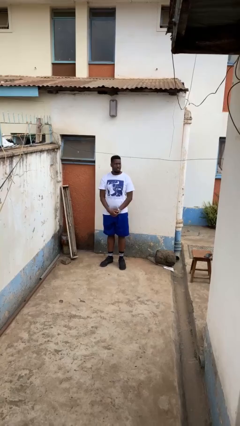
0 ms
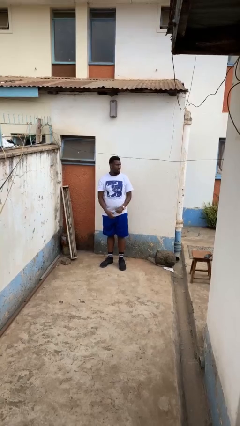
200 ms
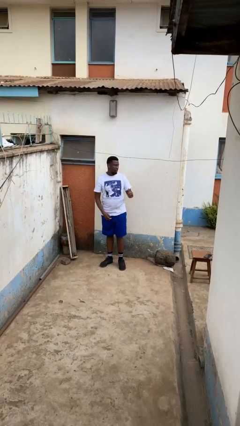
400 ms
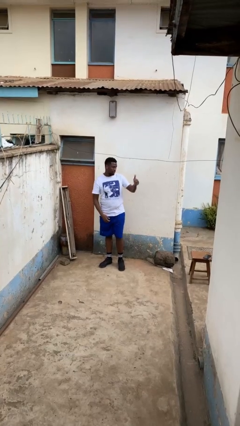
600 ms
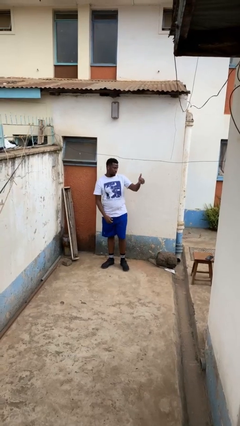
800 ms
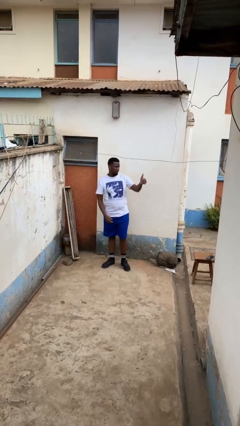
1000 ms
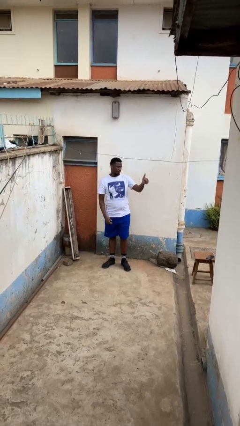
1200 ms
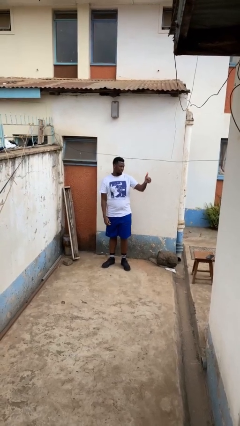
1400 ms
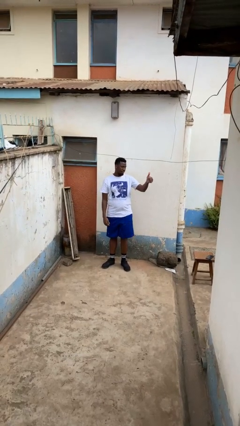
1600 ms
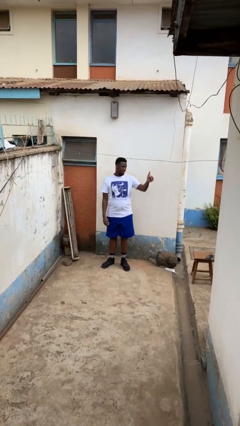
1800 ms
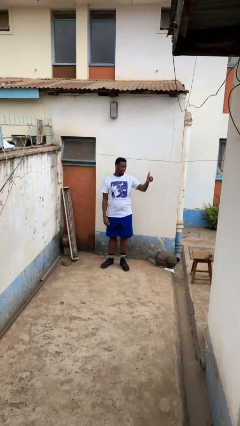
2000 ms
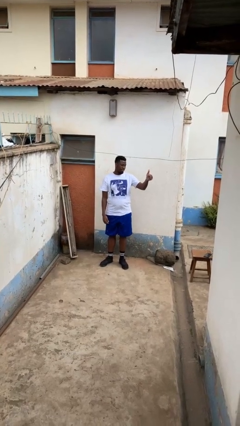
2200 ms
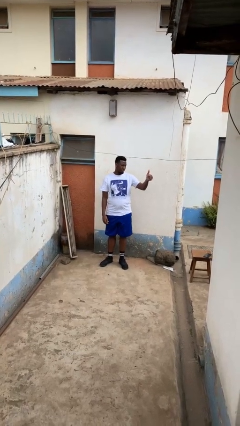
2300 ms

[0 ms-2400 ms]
person gestures thumbs up

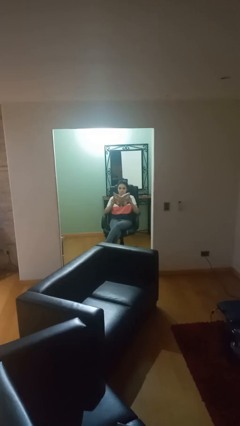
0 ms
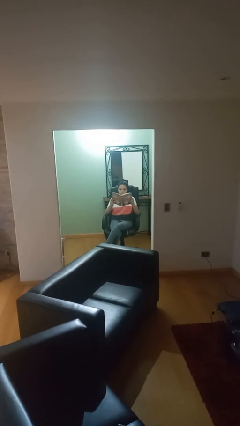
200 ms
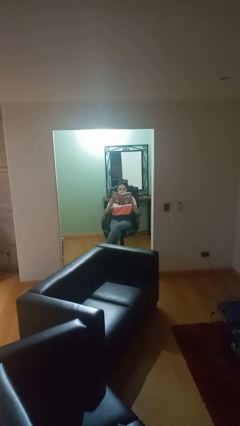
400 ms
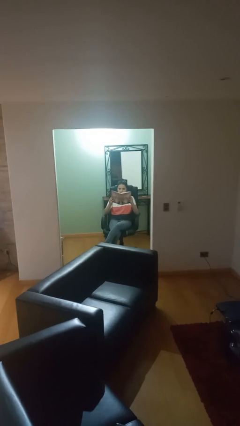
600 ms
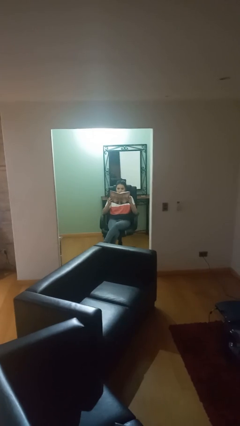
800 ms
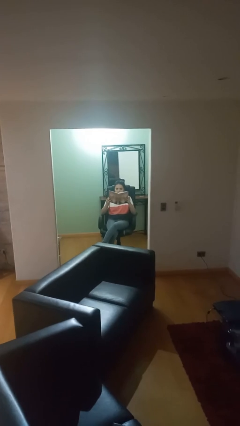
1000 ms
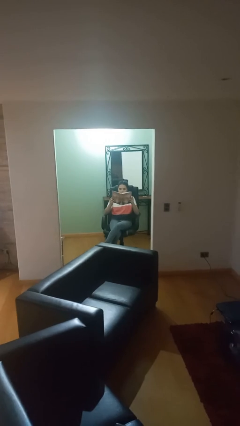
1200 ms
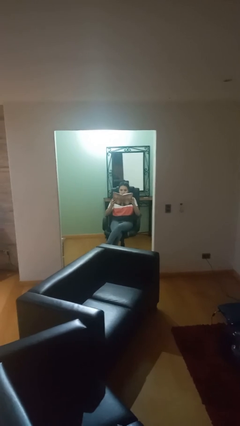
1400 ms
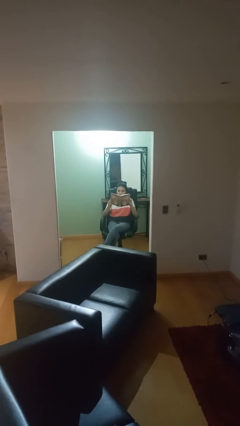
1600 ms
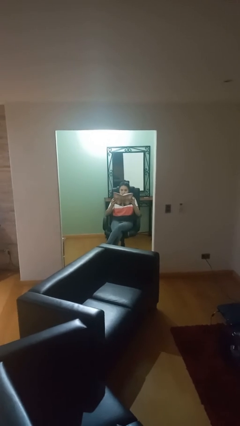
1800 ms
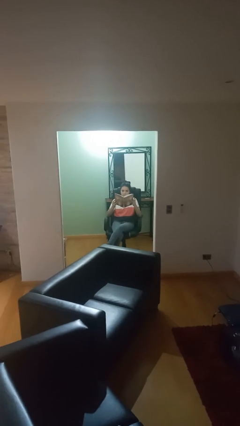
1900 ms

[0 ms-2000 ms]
person reads document

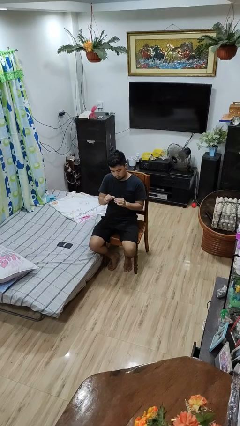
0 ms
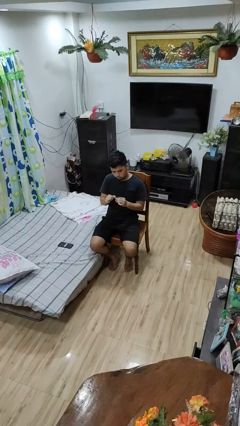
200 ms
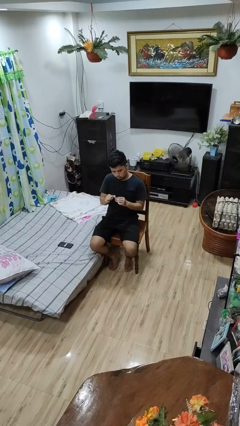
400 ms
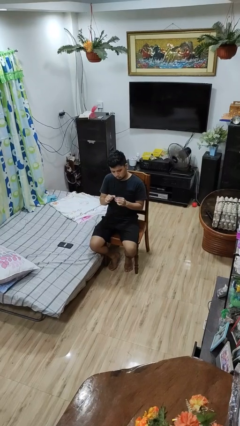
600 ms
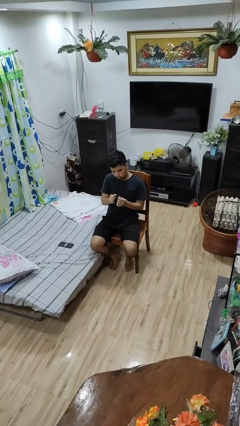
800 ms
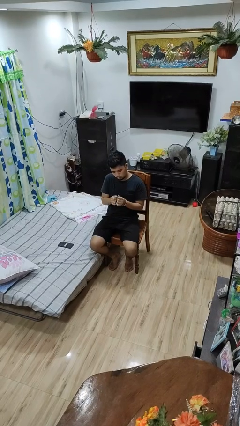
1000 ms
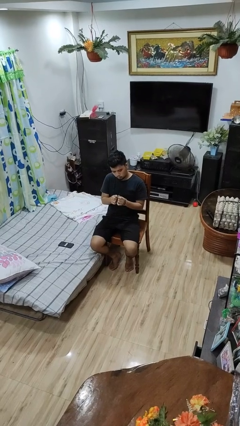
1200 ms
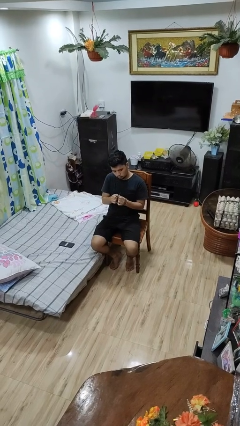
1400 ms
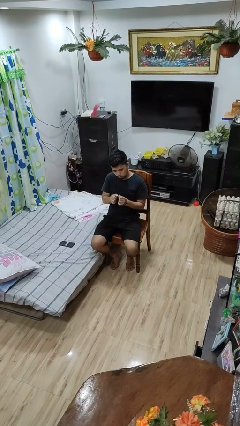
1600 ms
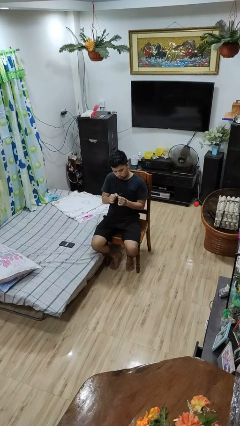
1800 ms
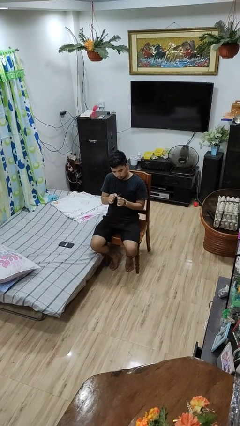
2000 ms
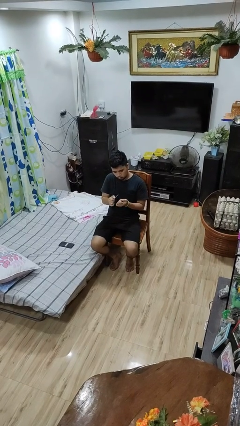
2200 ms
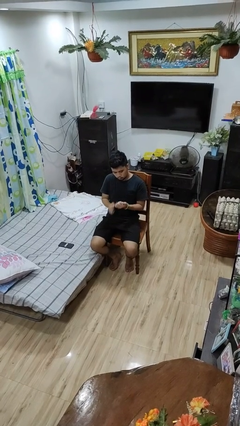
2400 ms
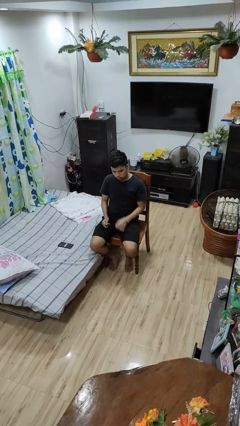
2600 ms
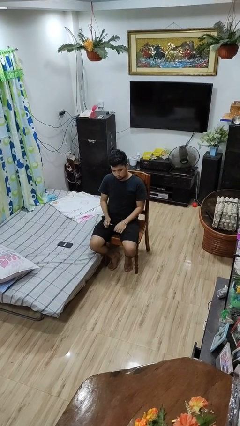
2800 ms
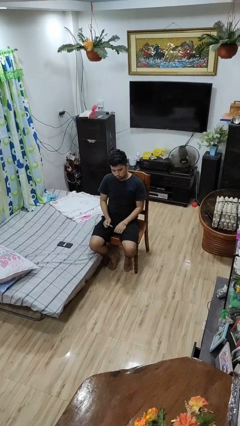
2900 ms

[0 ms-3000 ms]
person files fingernails

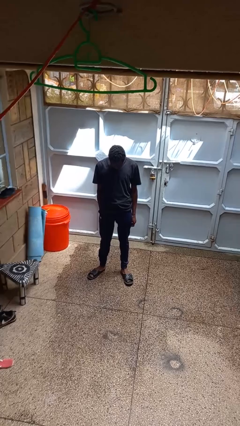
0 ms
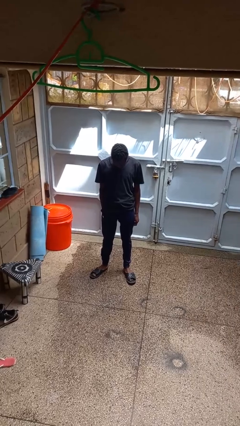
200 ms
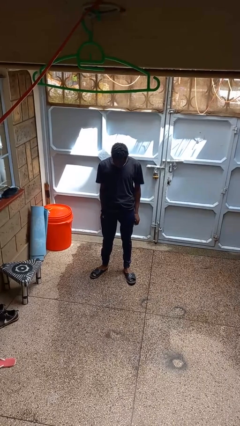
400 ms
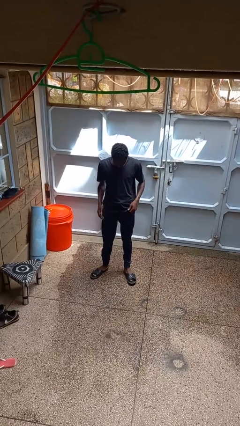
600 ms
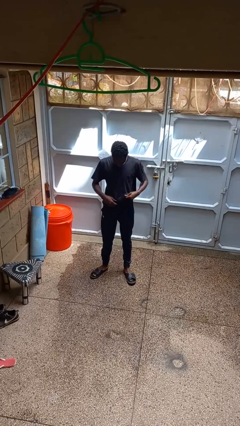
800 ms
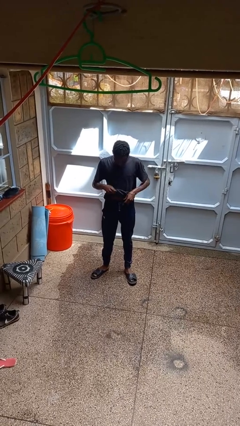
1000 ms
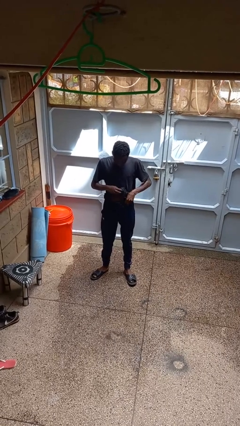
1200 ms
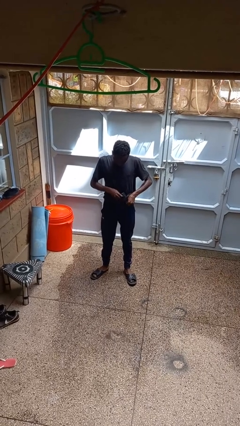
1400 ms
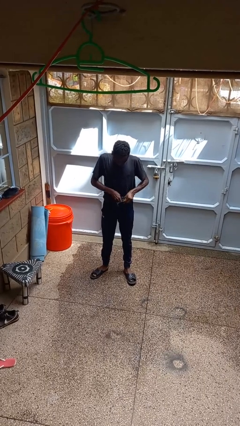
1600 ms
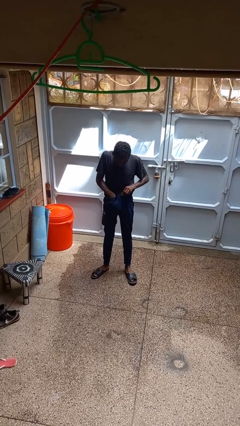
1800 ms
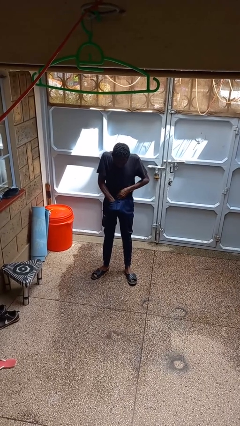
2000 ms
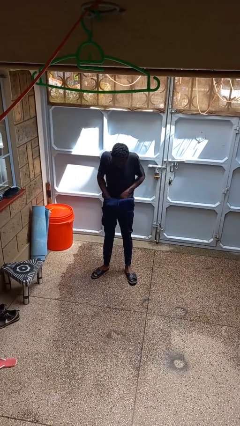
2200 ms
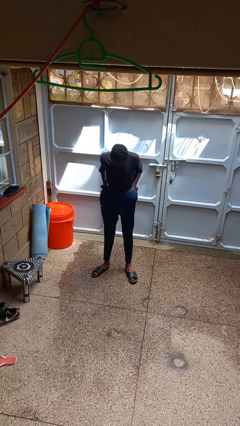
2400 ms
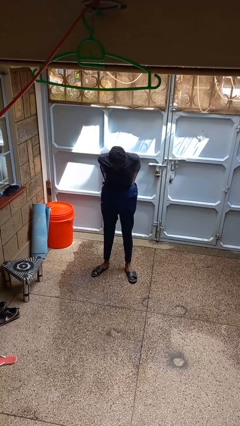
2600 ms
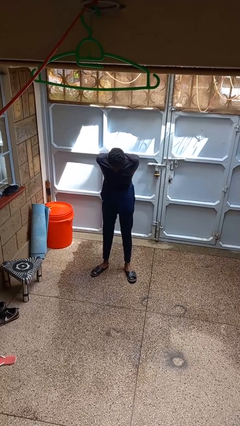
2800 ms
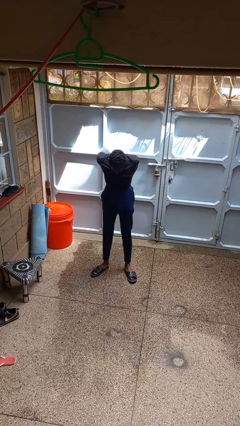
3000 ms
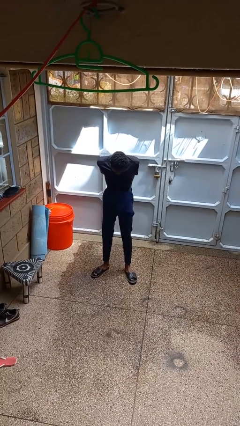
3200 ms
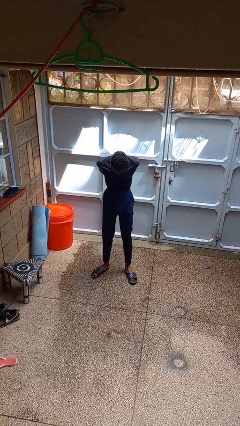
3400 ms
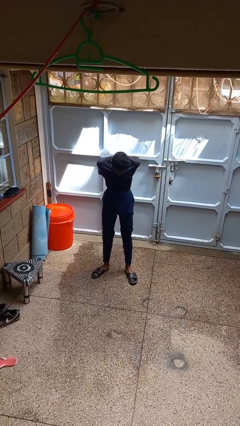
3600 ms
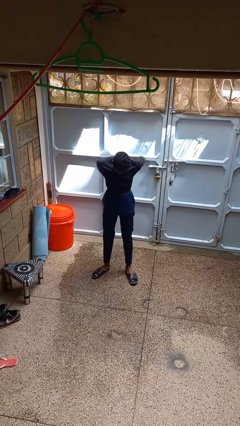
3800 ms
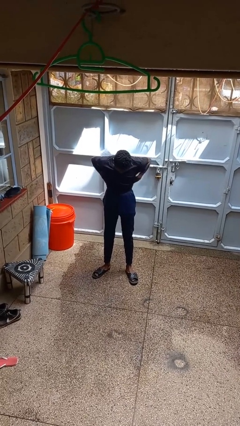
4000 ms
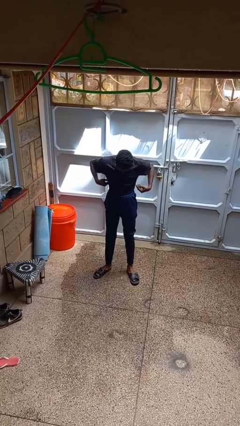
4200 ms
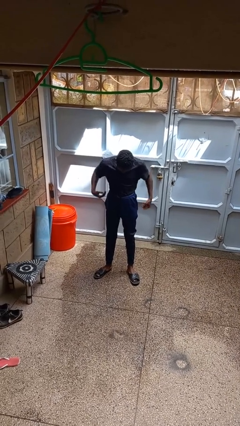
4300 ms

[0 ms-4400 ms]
person tucks in shirt

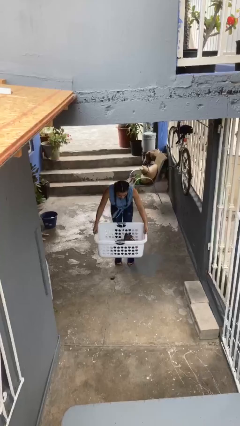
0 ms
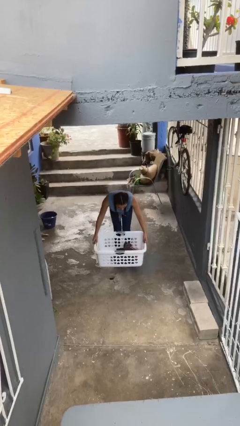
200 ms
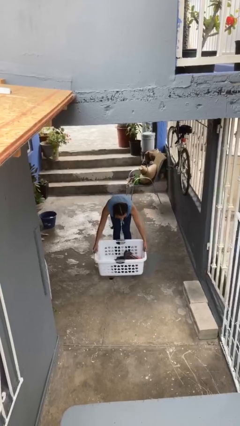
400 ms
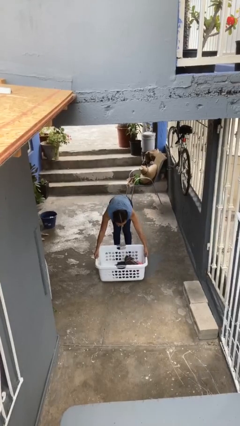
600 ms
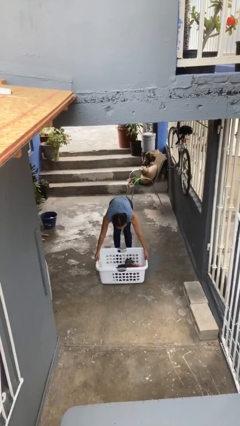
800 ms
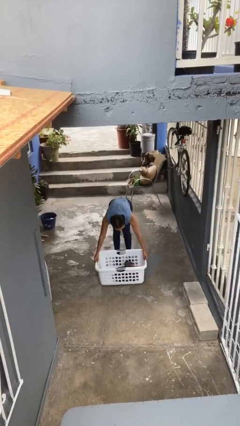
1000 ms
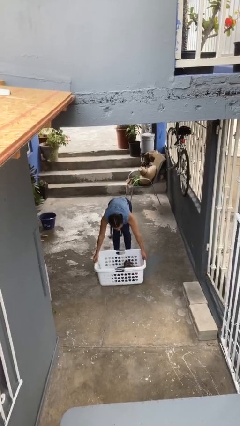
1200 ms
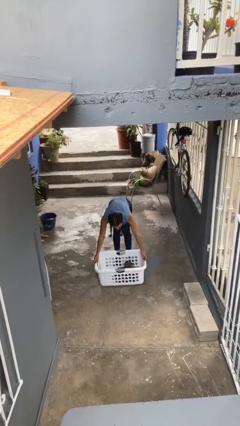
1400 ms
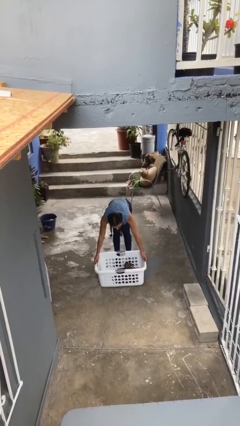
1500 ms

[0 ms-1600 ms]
person puts down object on floor

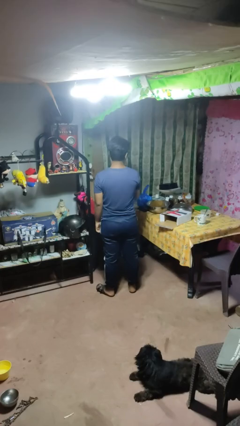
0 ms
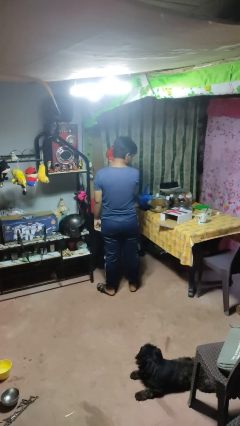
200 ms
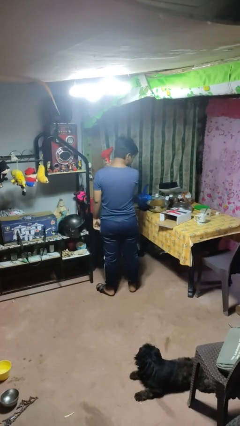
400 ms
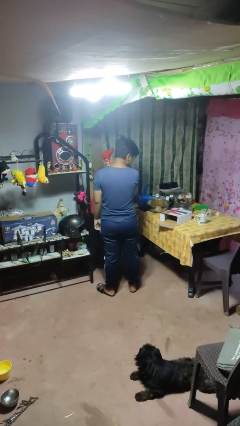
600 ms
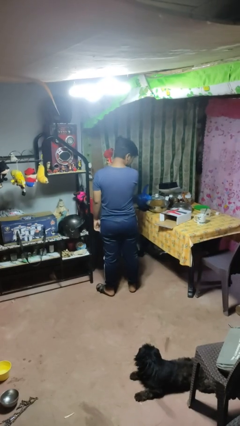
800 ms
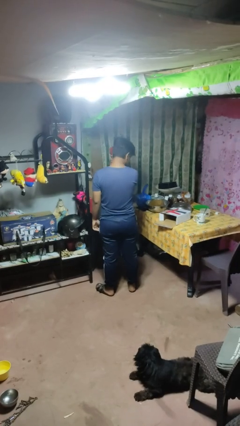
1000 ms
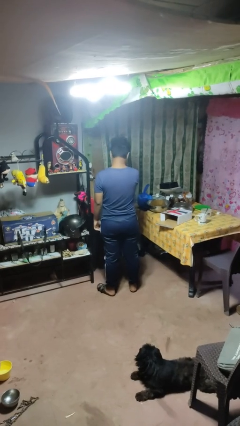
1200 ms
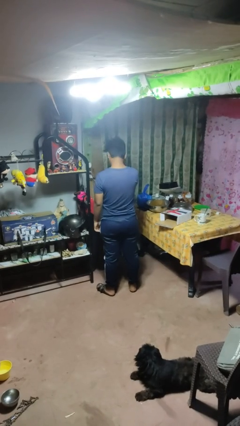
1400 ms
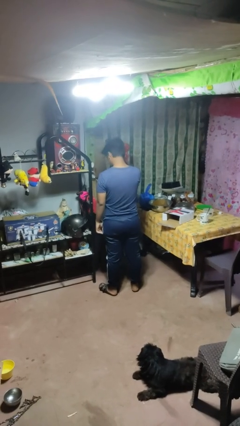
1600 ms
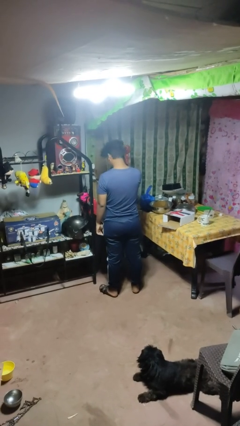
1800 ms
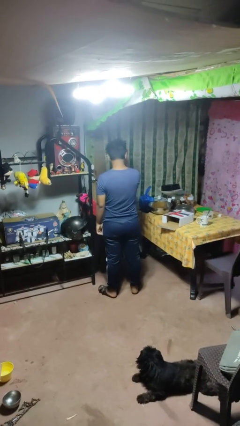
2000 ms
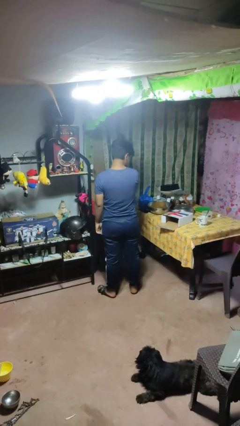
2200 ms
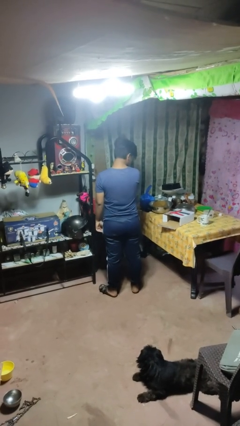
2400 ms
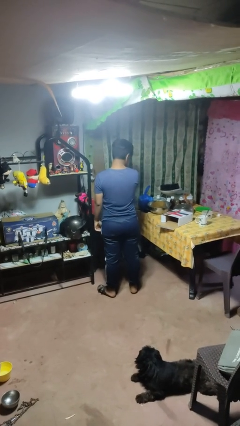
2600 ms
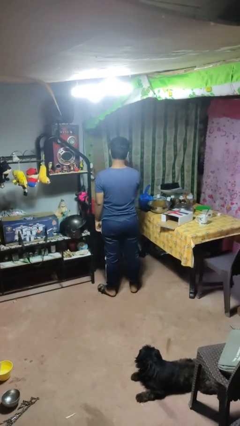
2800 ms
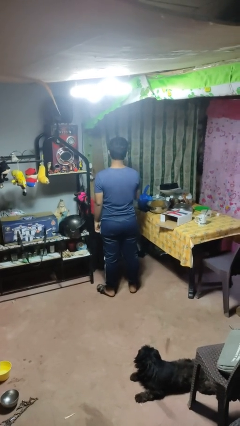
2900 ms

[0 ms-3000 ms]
person dries hair with hairdryer

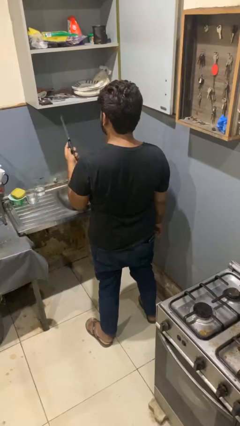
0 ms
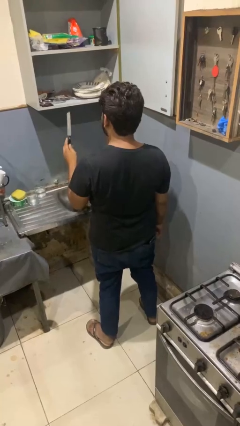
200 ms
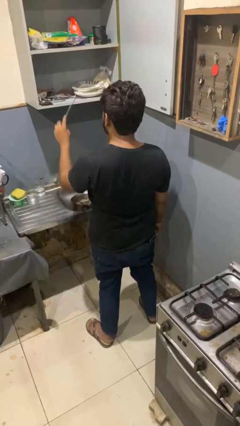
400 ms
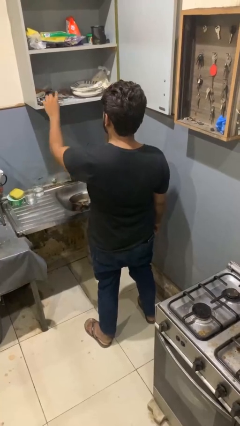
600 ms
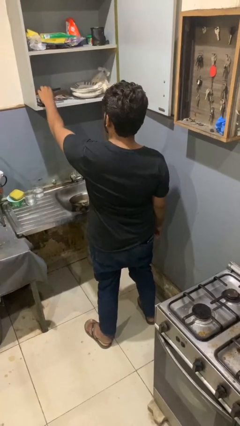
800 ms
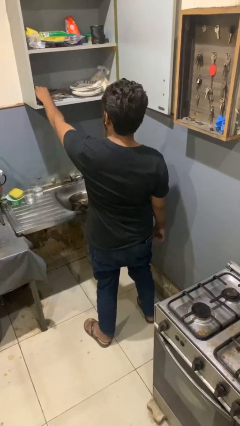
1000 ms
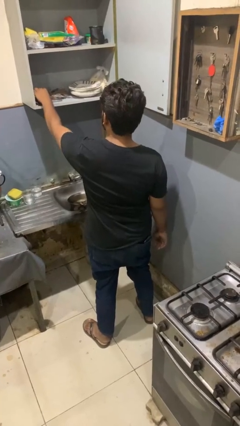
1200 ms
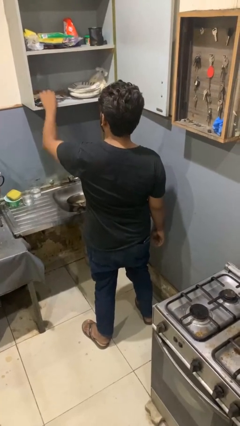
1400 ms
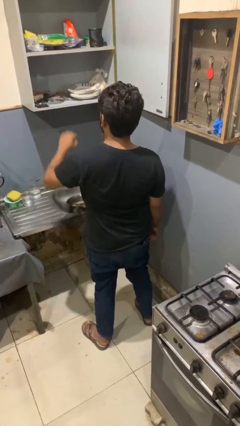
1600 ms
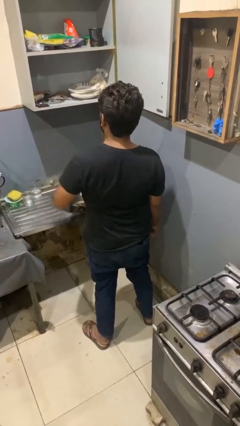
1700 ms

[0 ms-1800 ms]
person puts object into kitchen drawer
